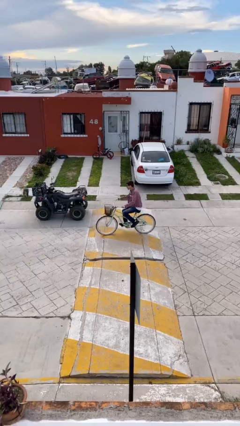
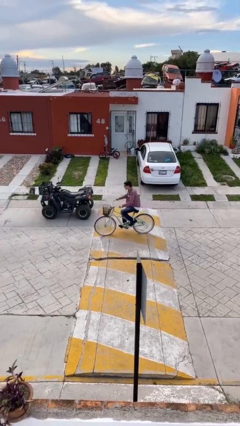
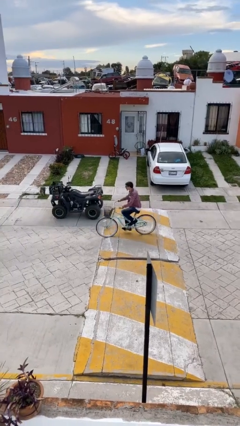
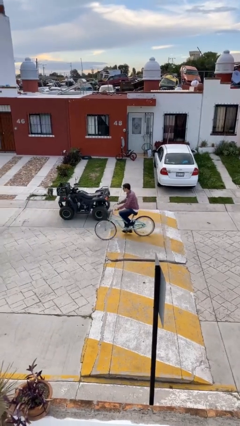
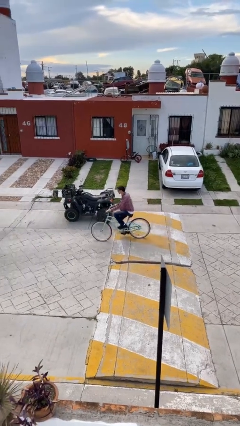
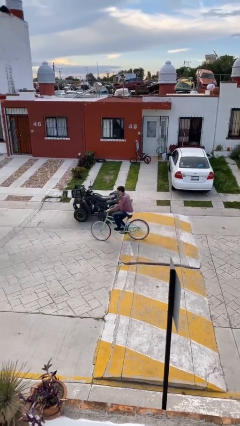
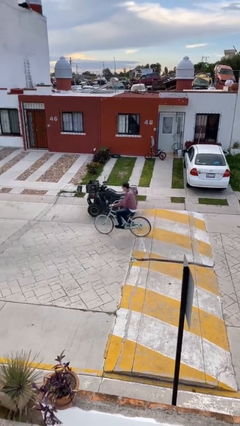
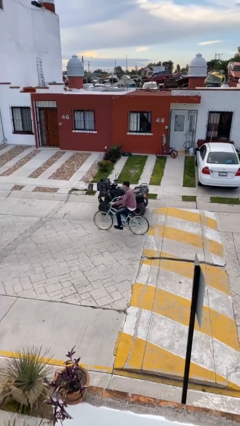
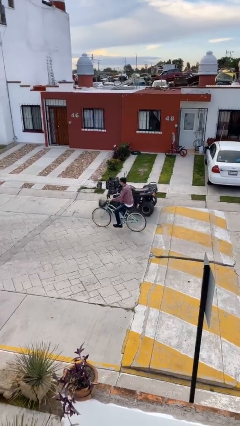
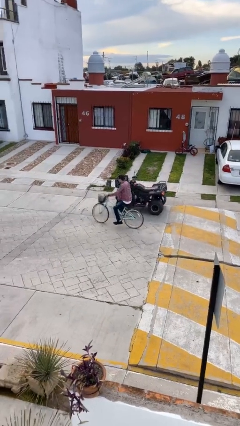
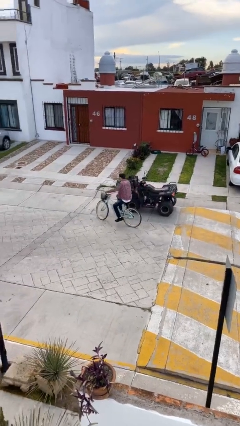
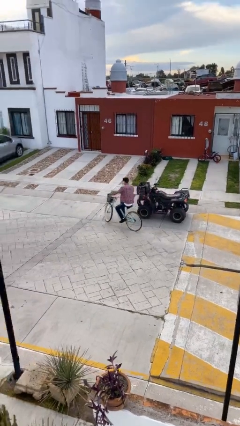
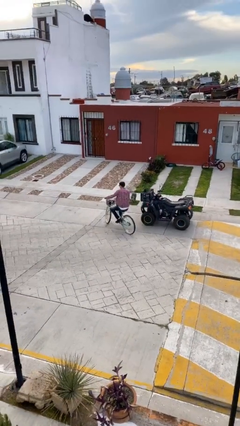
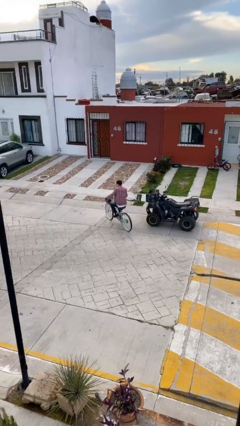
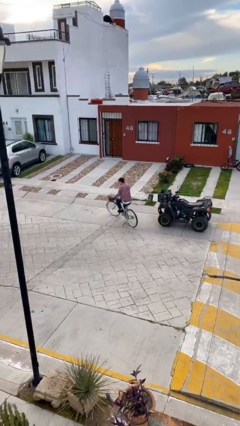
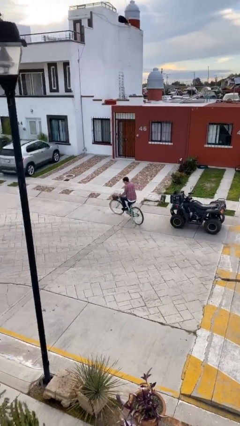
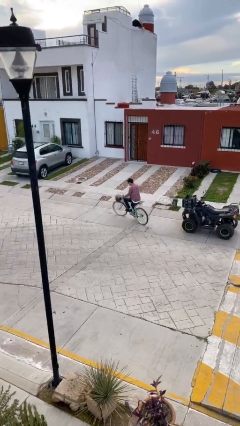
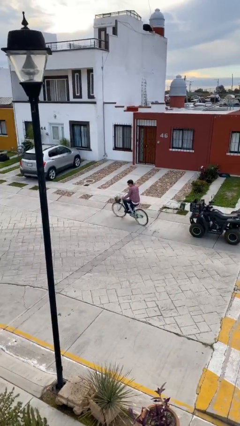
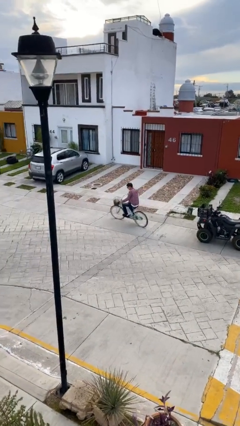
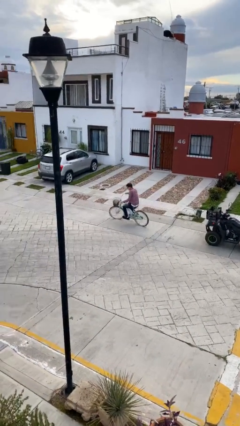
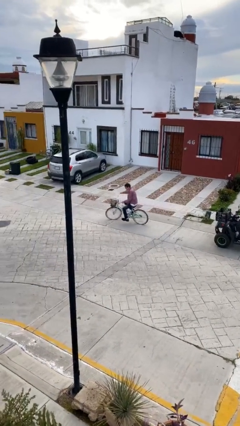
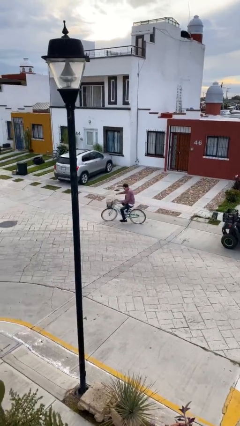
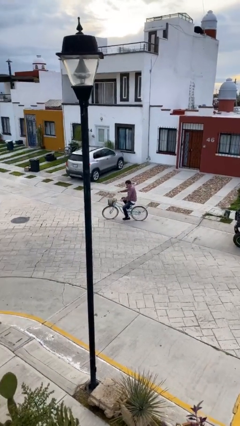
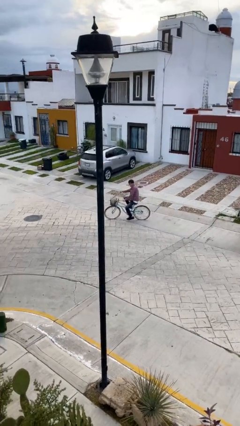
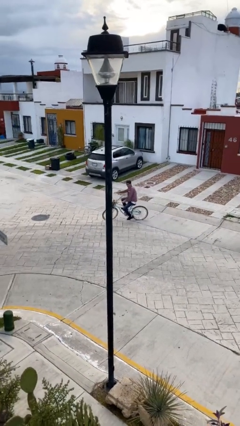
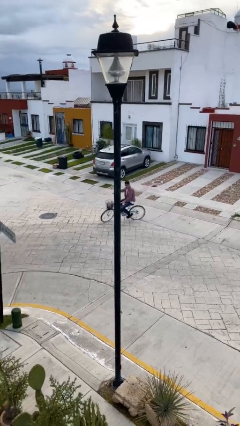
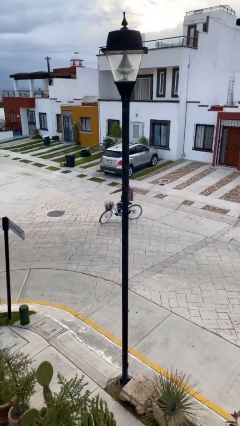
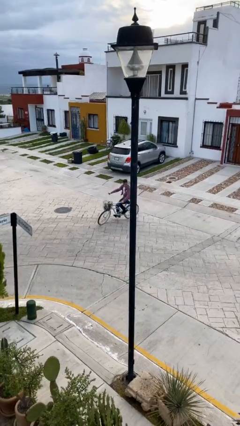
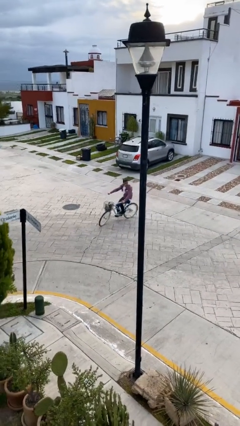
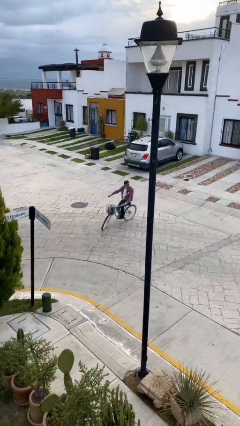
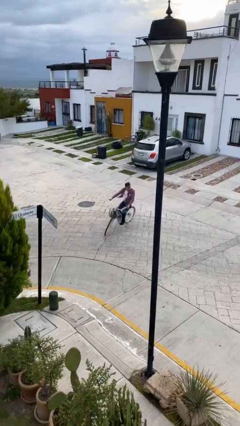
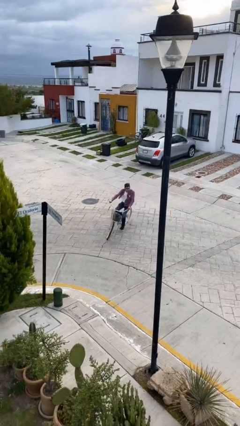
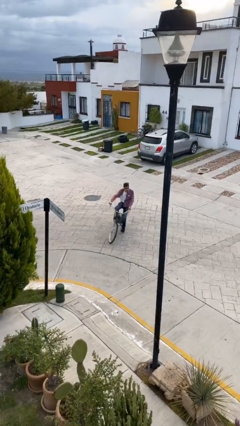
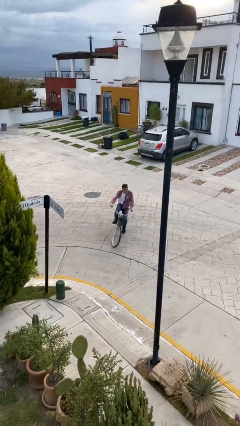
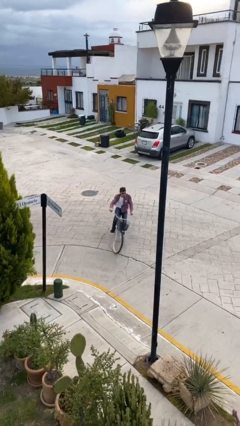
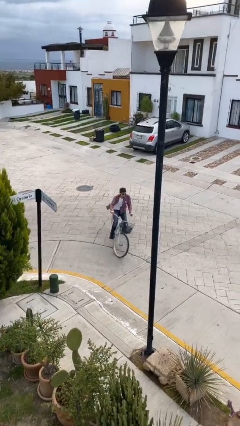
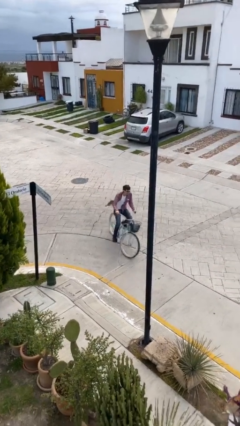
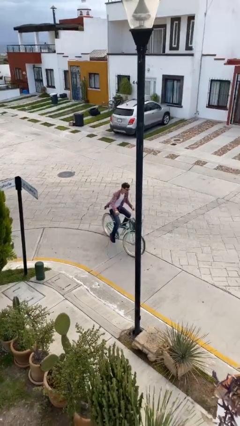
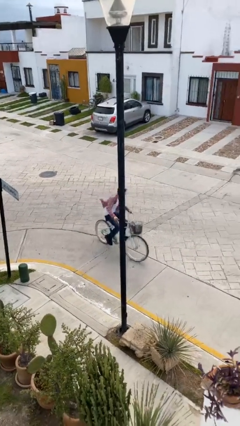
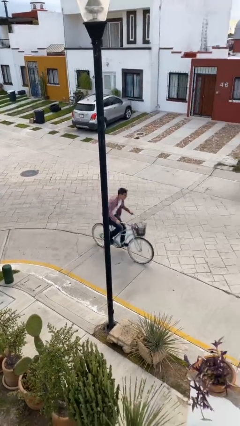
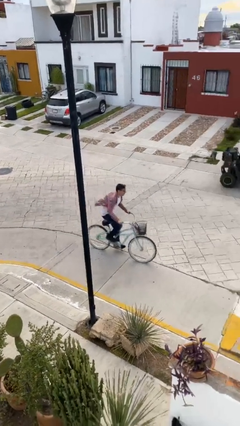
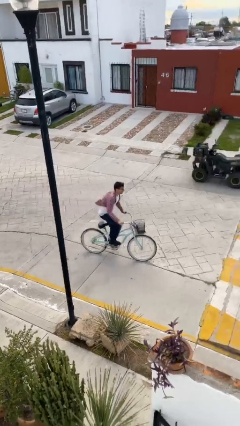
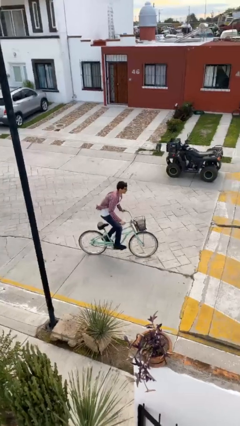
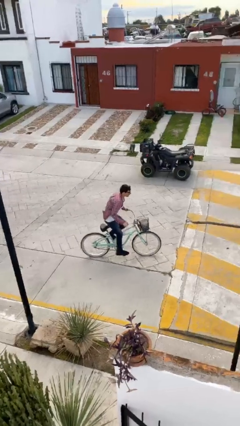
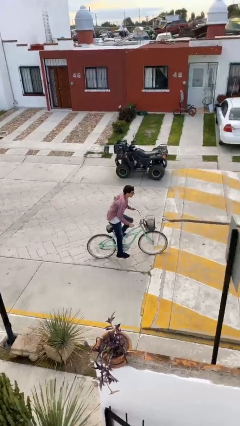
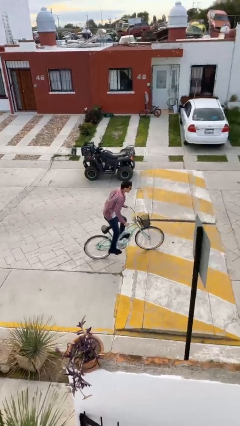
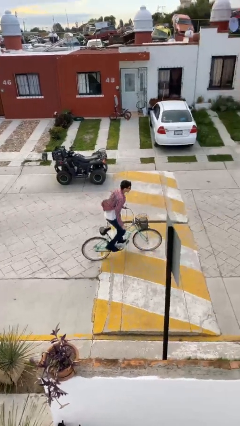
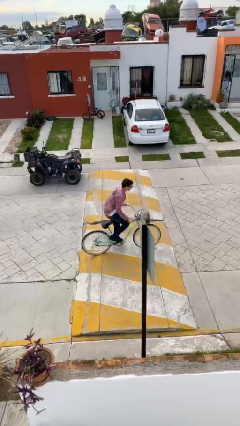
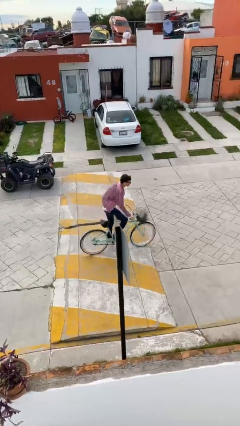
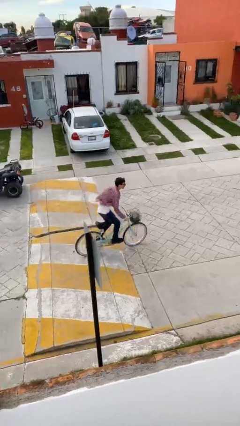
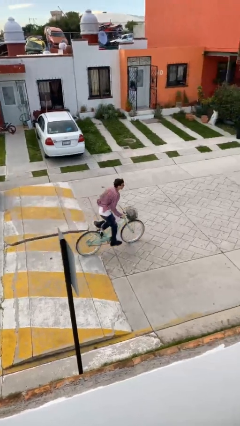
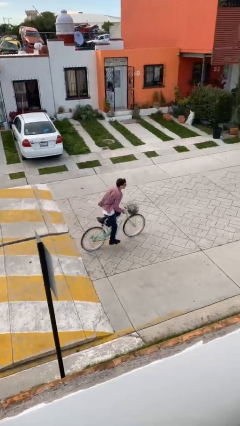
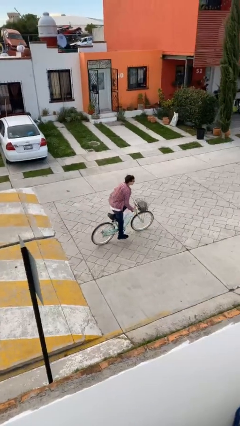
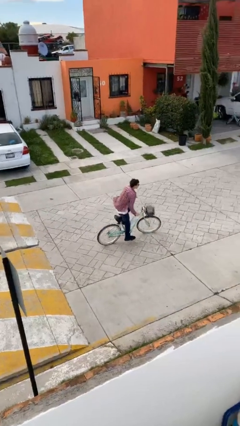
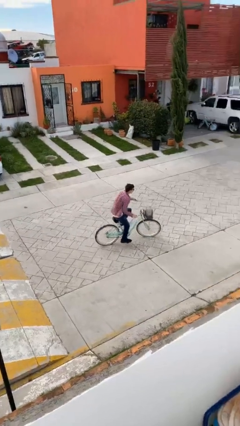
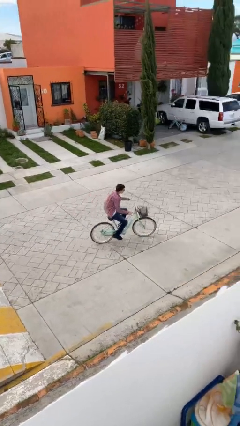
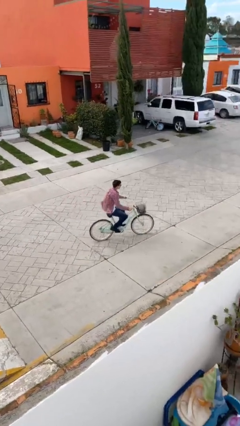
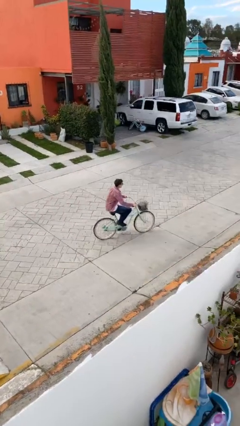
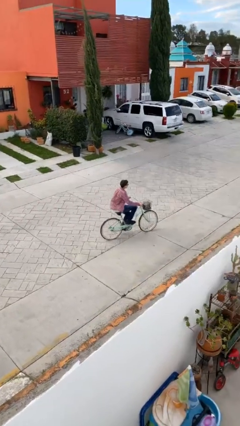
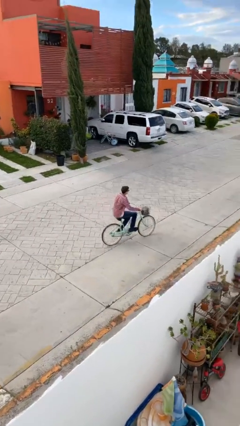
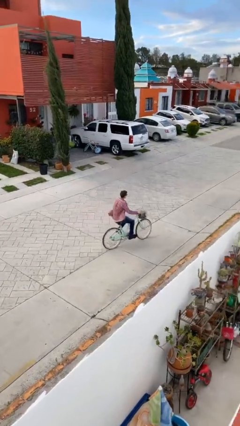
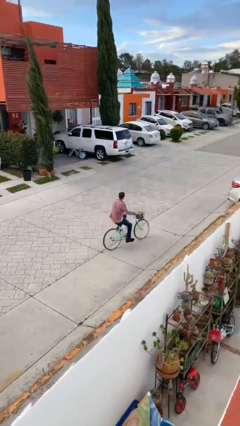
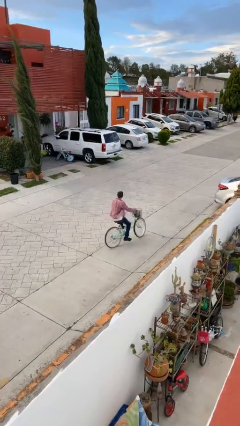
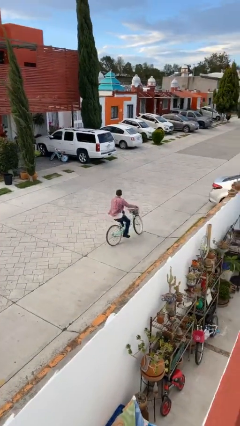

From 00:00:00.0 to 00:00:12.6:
person rides bicycle

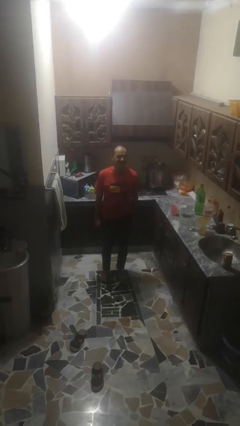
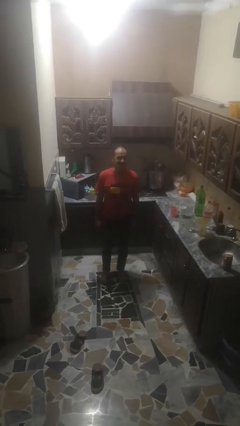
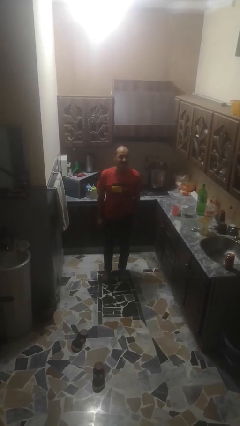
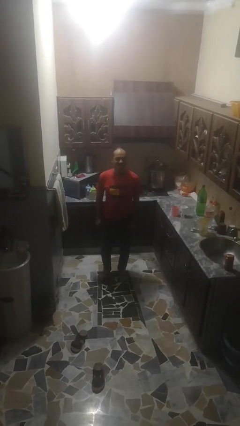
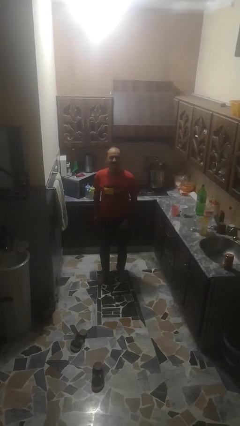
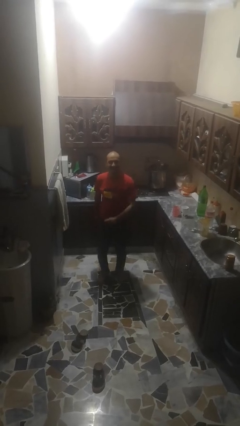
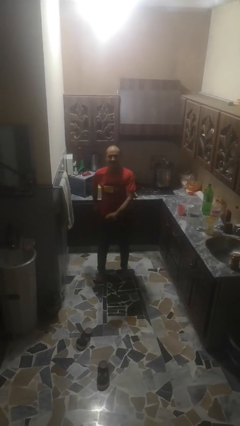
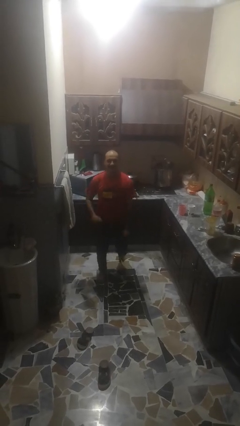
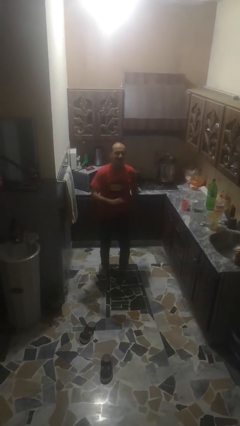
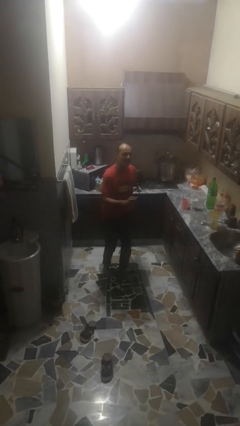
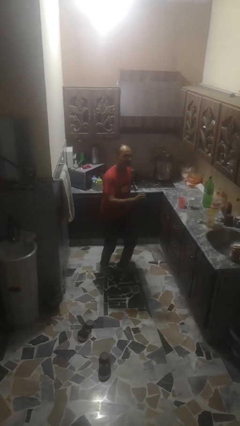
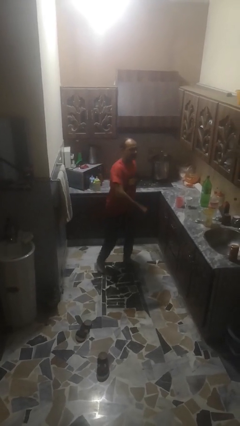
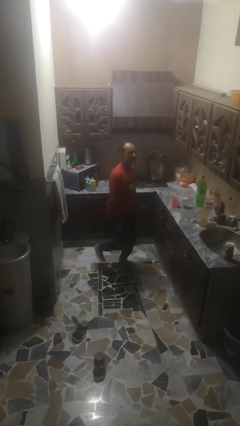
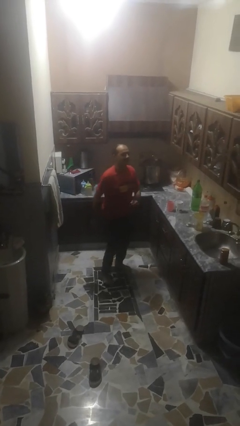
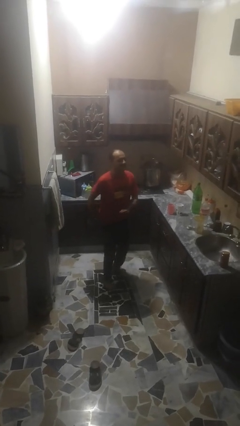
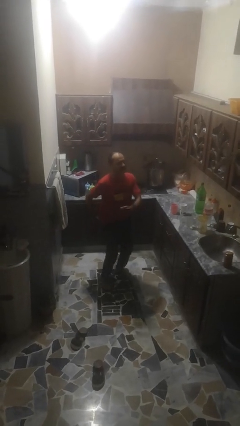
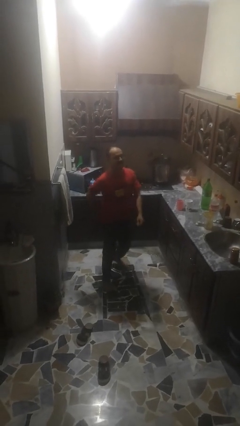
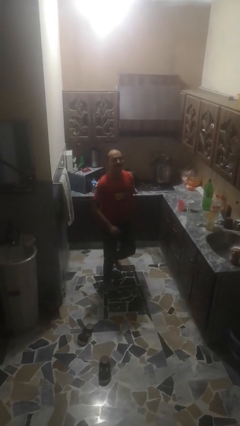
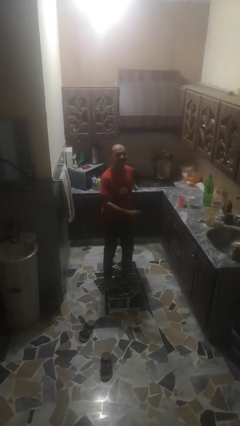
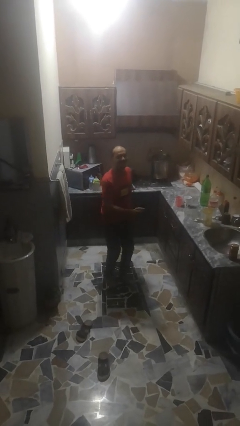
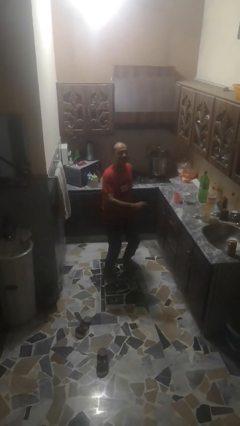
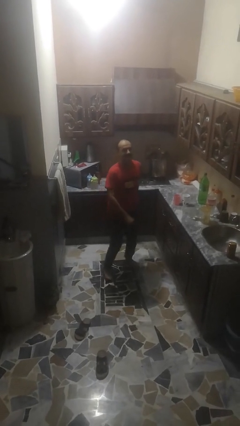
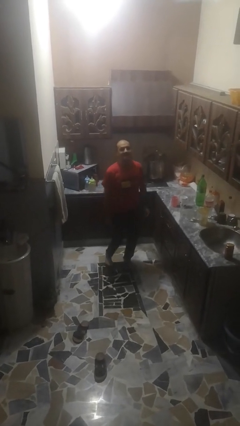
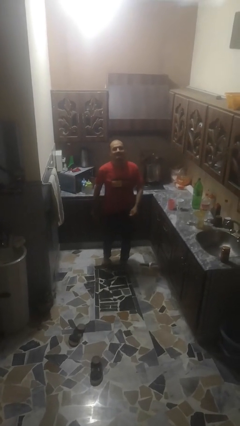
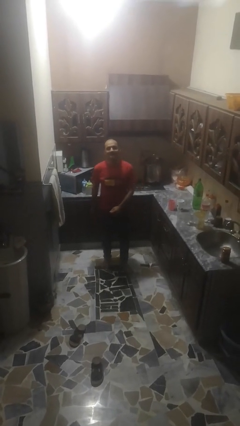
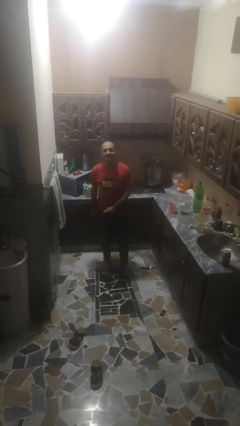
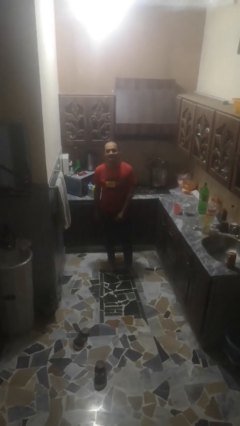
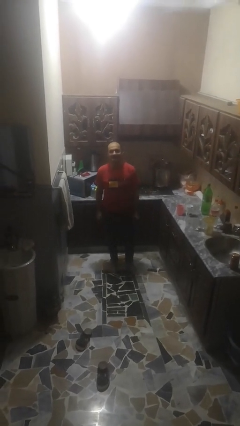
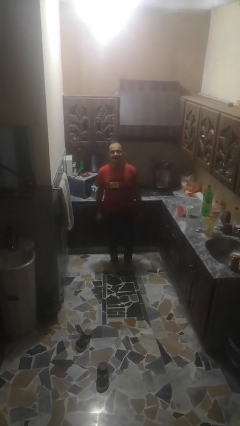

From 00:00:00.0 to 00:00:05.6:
person dances in place
